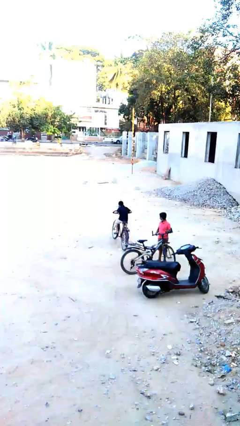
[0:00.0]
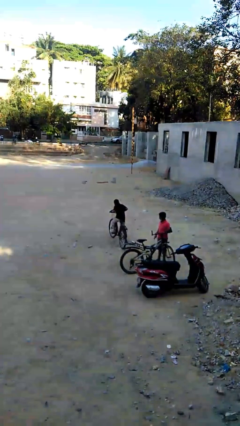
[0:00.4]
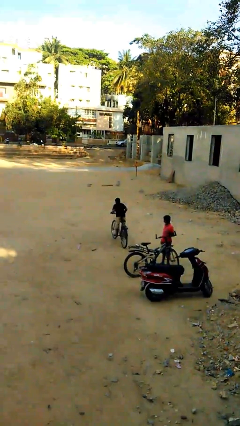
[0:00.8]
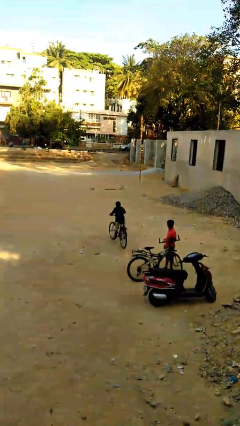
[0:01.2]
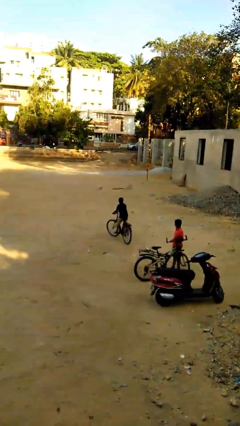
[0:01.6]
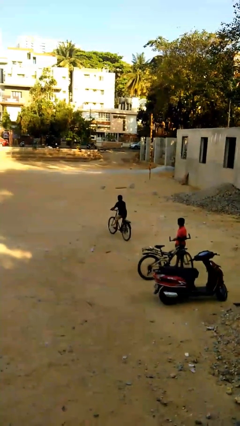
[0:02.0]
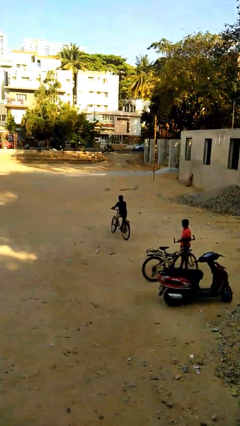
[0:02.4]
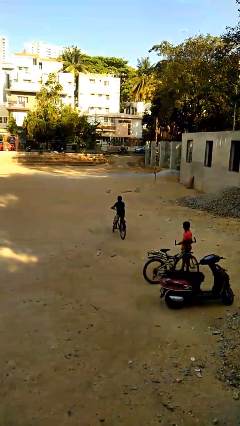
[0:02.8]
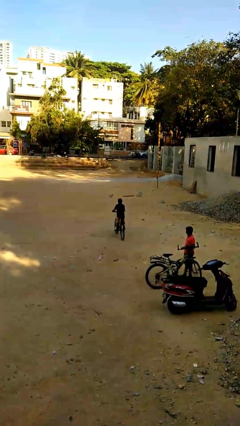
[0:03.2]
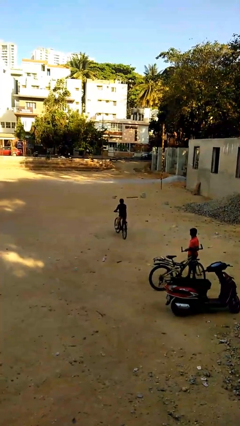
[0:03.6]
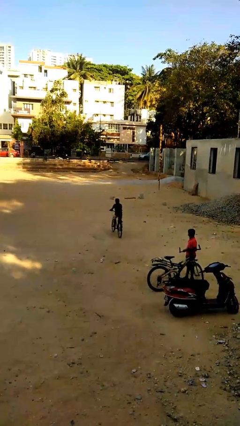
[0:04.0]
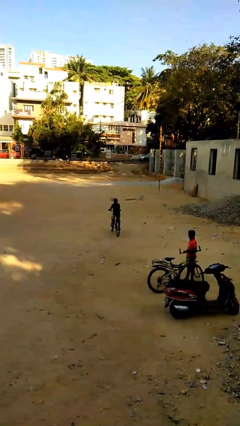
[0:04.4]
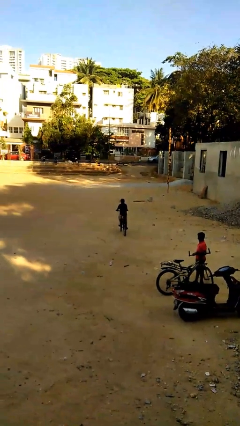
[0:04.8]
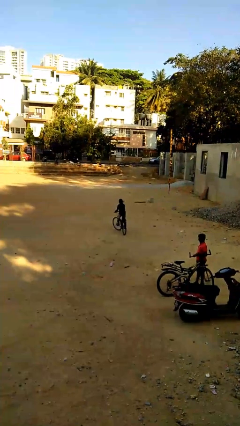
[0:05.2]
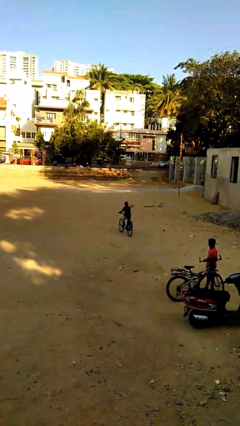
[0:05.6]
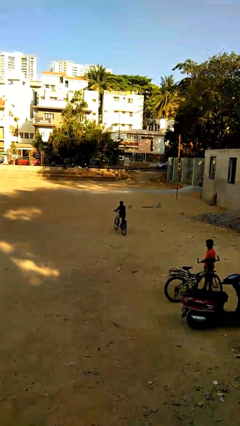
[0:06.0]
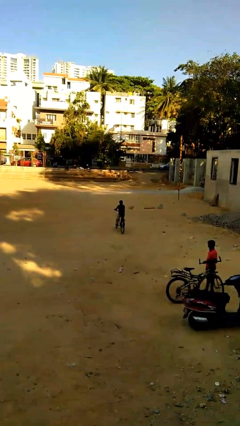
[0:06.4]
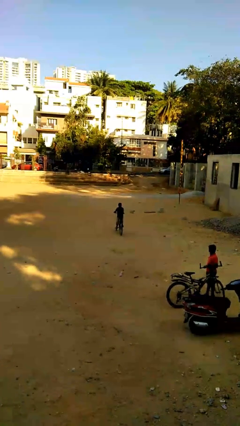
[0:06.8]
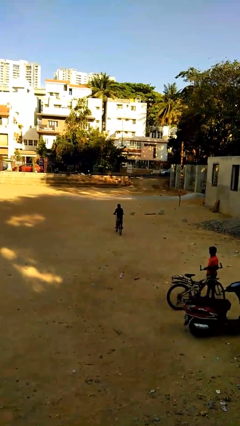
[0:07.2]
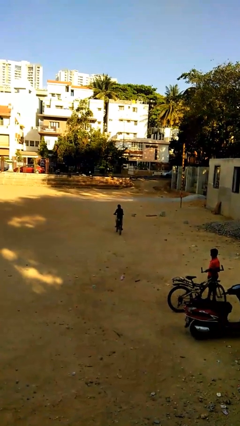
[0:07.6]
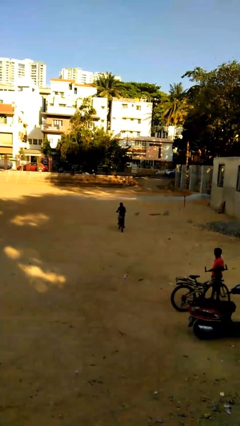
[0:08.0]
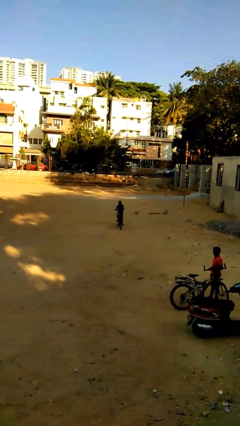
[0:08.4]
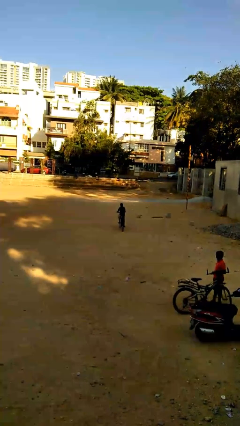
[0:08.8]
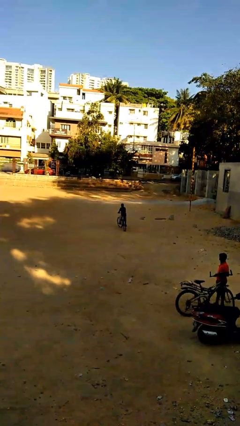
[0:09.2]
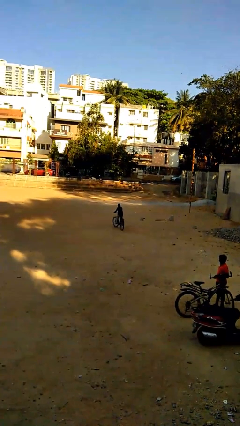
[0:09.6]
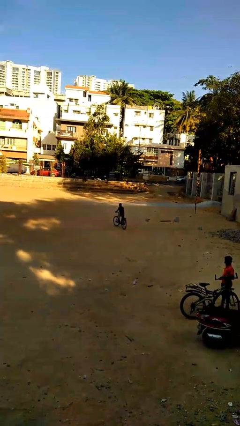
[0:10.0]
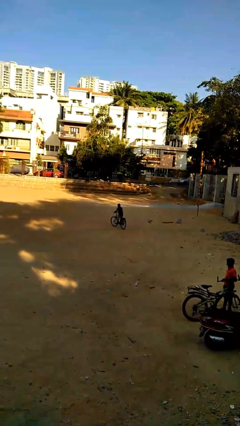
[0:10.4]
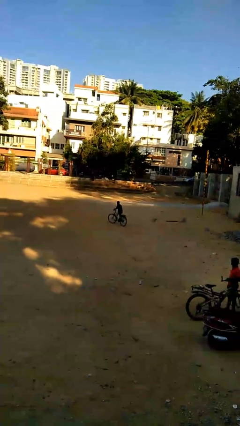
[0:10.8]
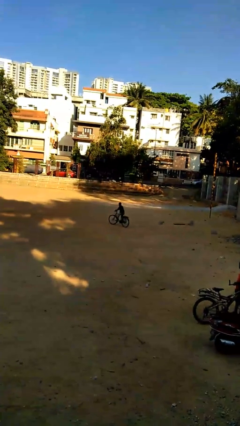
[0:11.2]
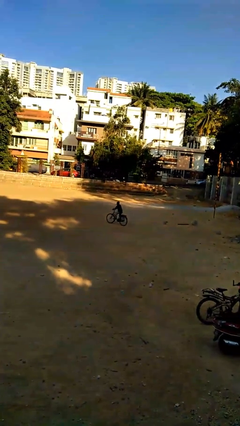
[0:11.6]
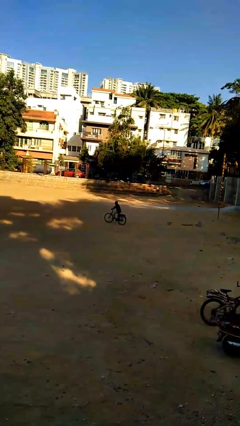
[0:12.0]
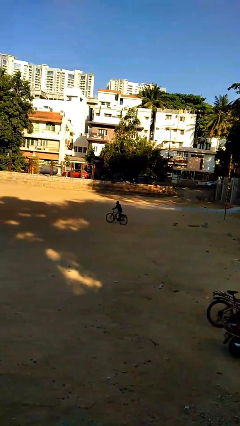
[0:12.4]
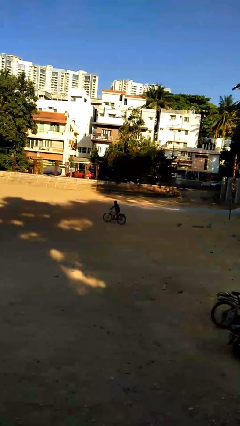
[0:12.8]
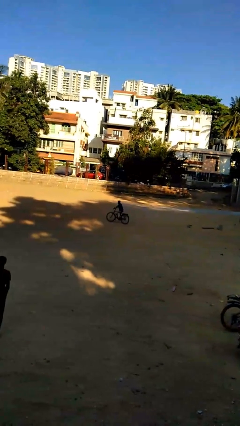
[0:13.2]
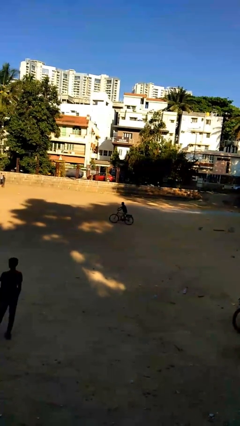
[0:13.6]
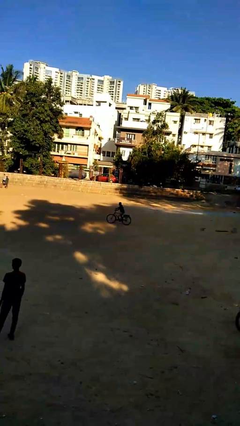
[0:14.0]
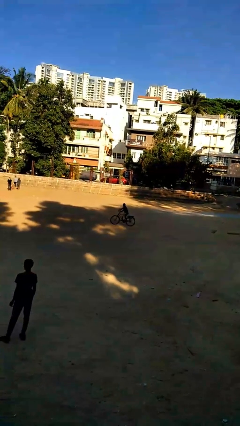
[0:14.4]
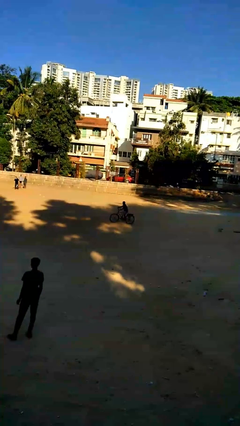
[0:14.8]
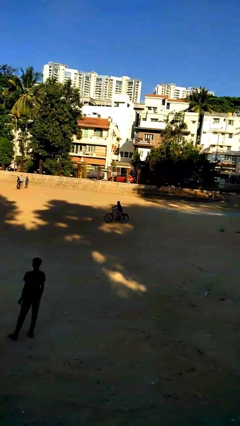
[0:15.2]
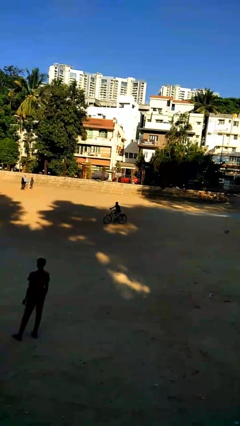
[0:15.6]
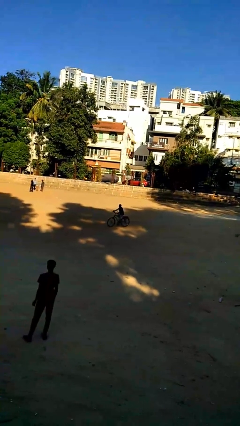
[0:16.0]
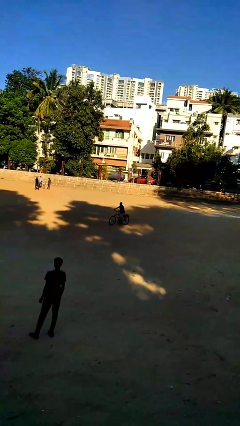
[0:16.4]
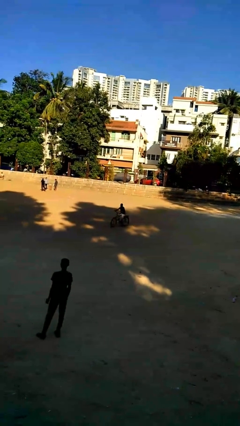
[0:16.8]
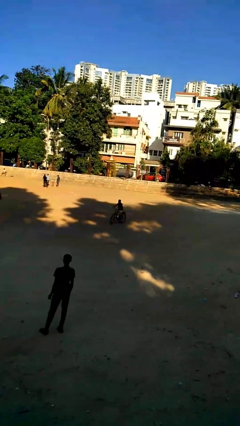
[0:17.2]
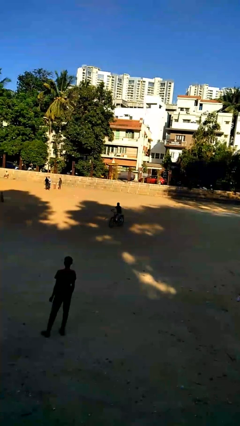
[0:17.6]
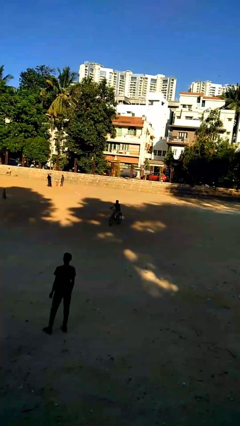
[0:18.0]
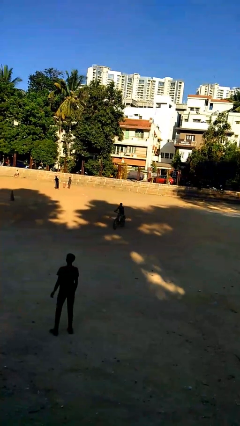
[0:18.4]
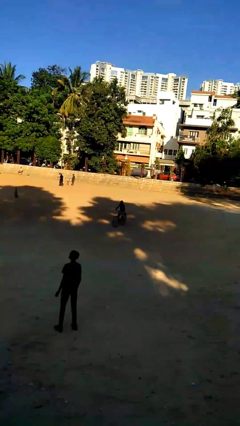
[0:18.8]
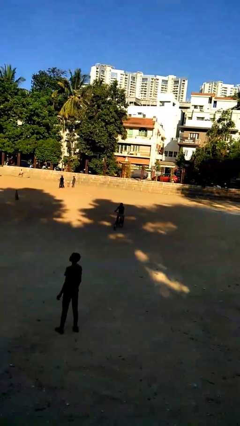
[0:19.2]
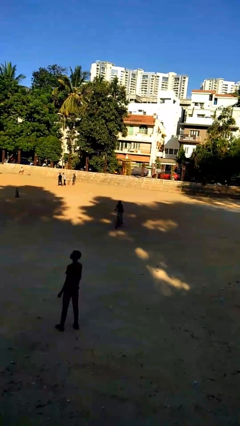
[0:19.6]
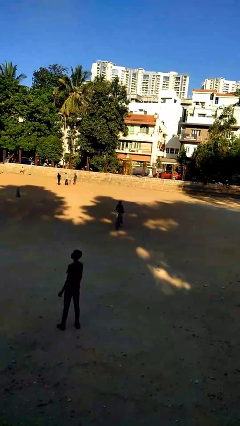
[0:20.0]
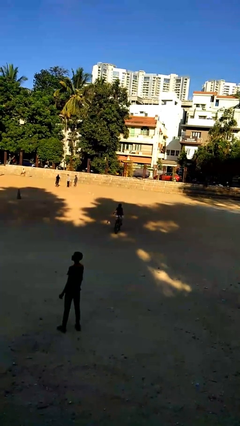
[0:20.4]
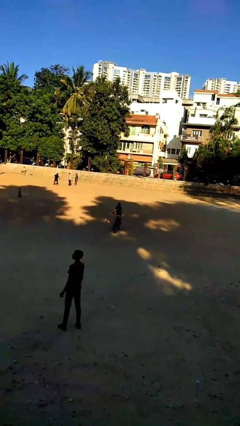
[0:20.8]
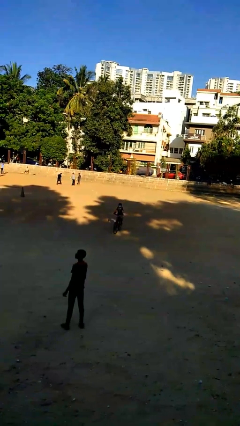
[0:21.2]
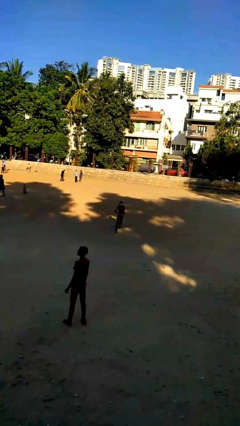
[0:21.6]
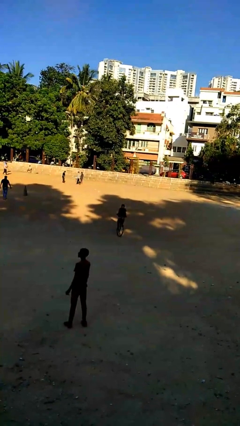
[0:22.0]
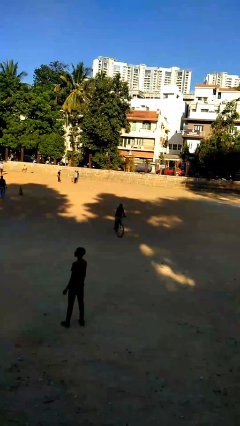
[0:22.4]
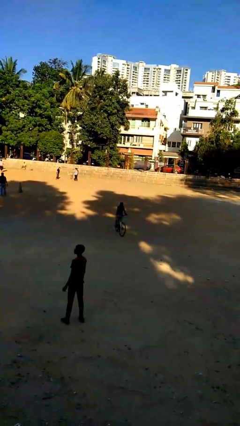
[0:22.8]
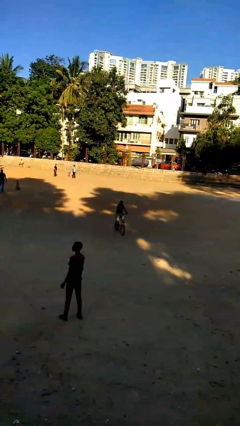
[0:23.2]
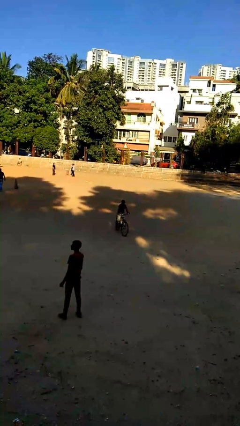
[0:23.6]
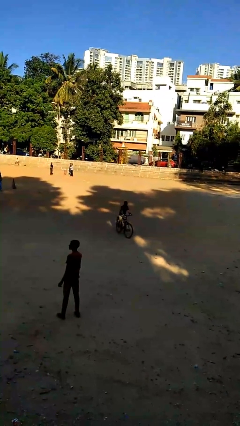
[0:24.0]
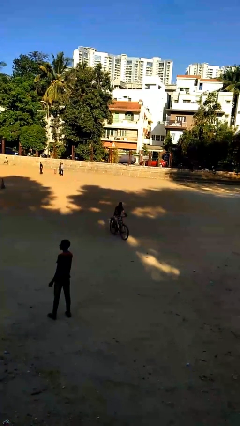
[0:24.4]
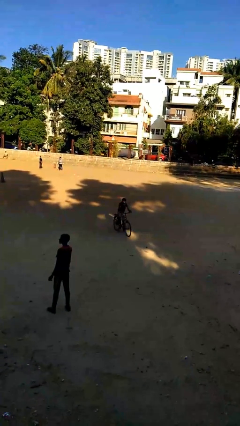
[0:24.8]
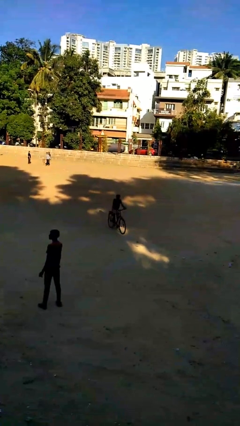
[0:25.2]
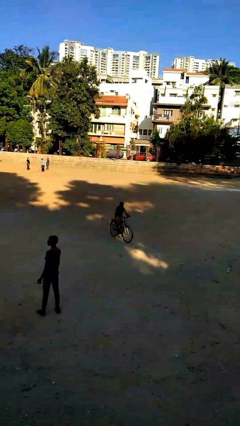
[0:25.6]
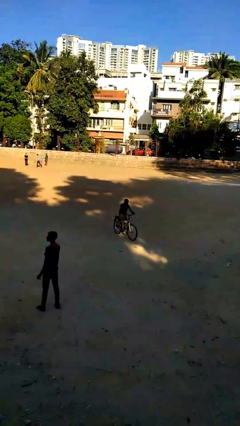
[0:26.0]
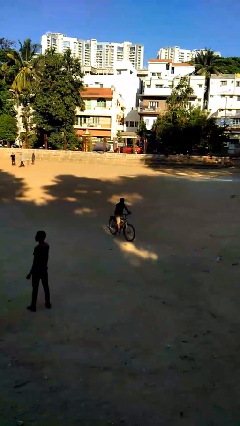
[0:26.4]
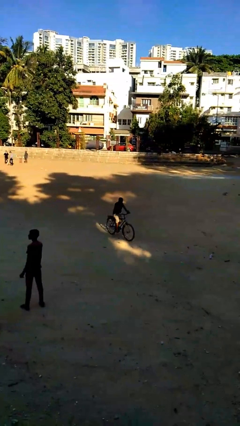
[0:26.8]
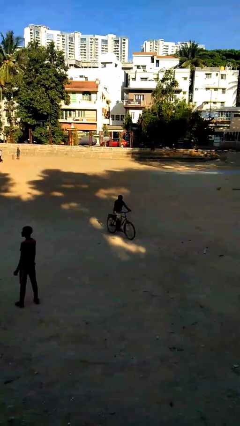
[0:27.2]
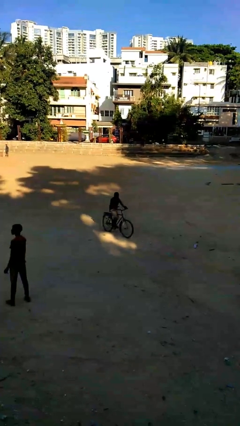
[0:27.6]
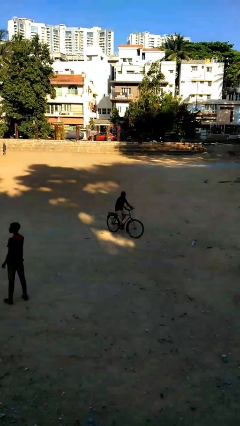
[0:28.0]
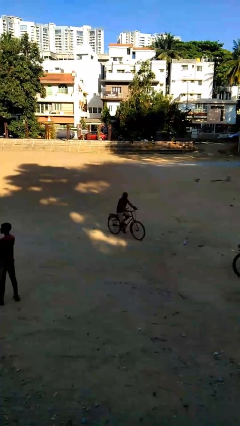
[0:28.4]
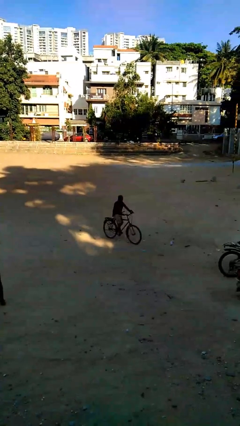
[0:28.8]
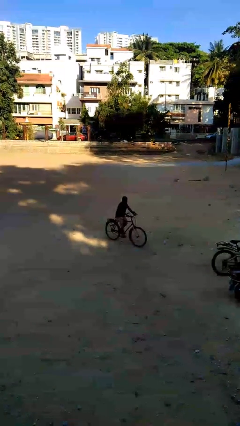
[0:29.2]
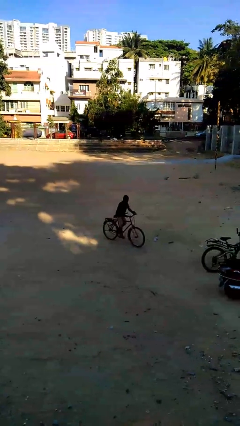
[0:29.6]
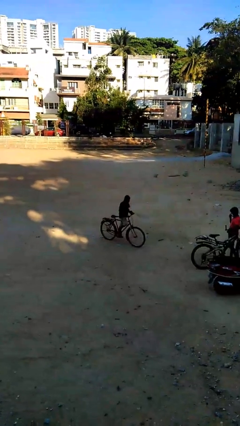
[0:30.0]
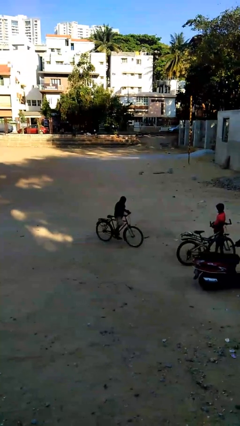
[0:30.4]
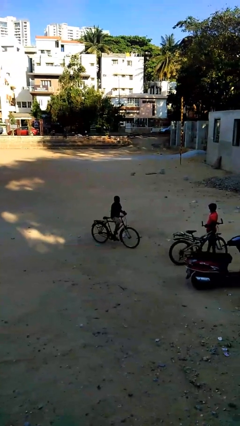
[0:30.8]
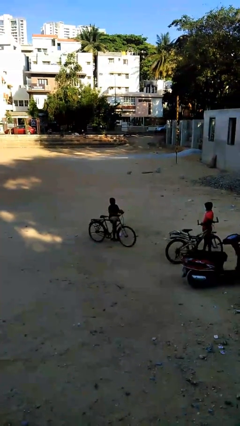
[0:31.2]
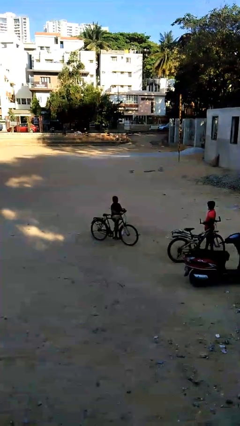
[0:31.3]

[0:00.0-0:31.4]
person rides bicycle

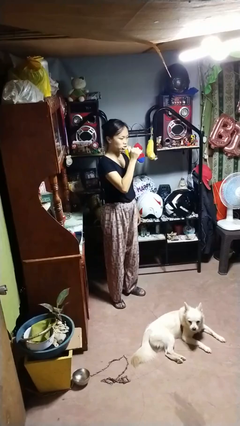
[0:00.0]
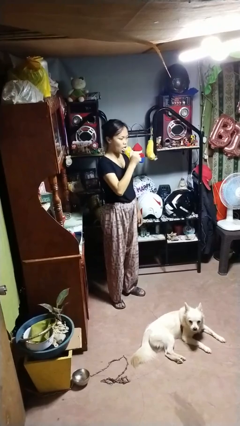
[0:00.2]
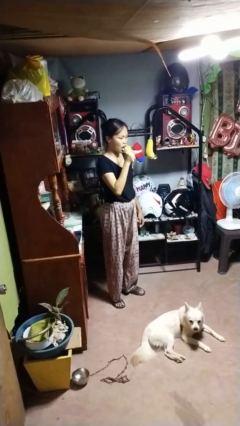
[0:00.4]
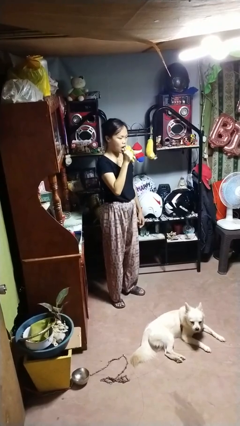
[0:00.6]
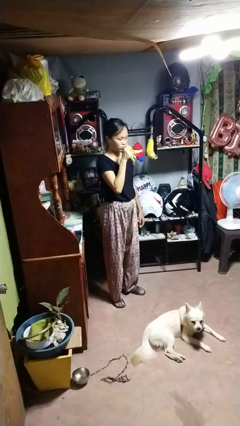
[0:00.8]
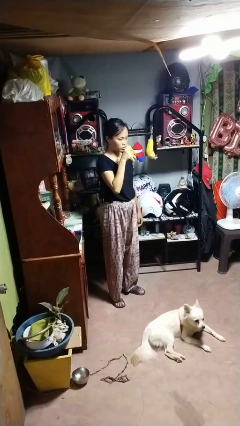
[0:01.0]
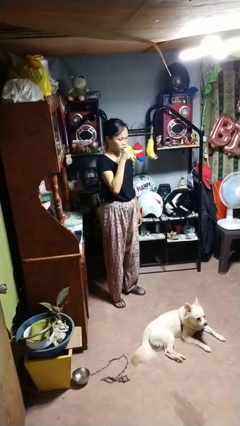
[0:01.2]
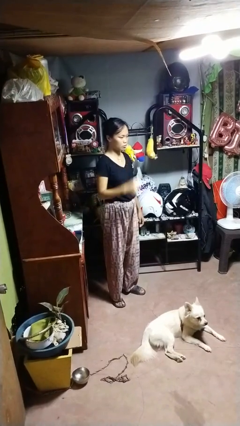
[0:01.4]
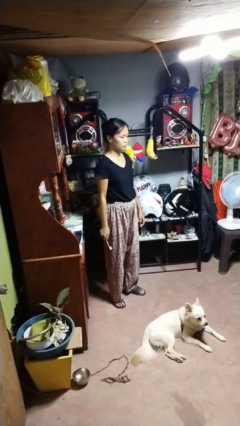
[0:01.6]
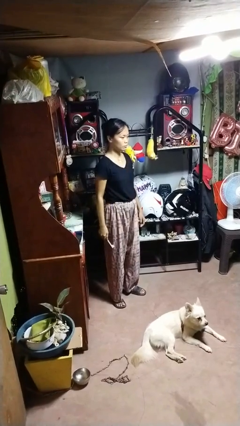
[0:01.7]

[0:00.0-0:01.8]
person brushes teeth

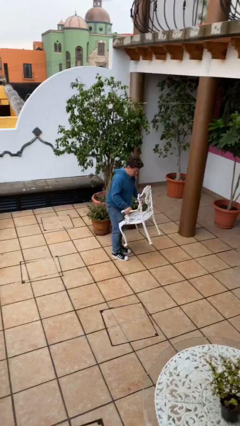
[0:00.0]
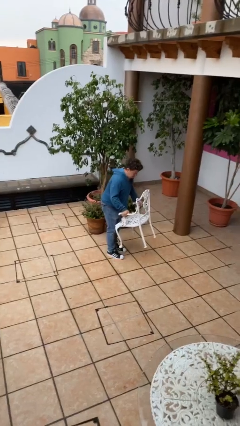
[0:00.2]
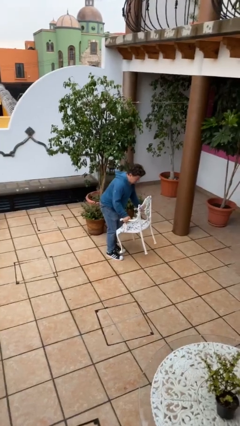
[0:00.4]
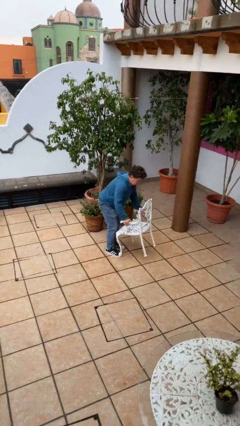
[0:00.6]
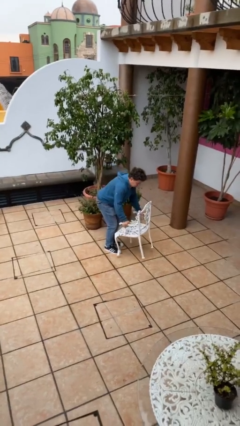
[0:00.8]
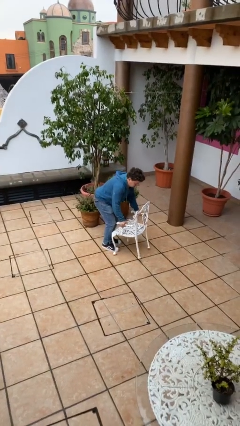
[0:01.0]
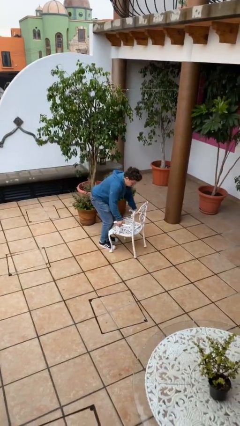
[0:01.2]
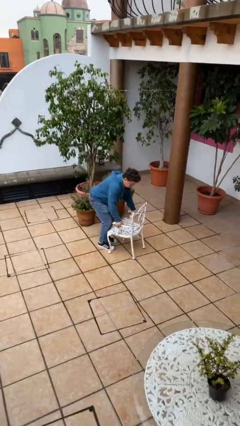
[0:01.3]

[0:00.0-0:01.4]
person puts down object on floor
